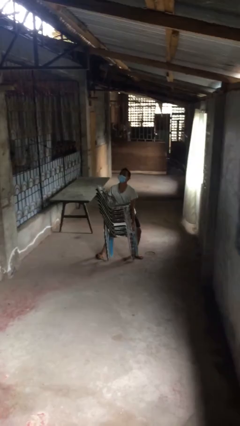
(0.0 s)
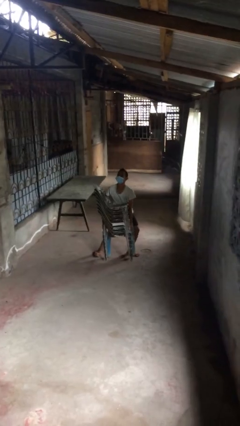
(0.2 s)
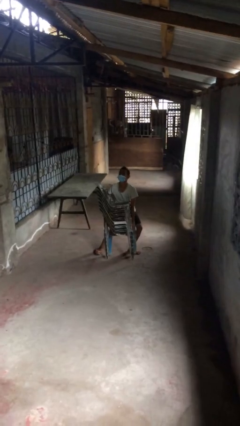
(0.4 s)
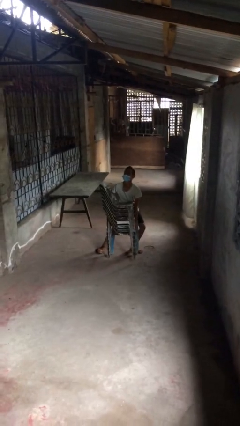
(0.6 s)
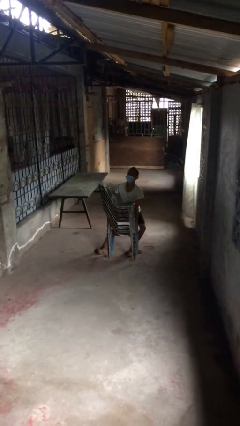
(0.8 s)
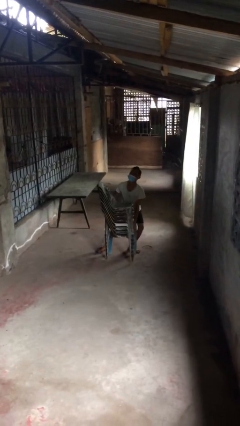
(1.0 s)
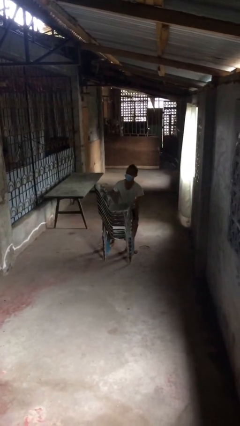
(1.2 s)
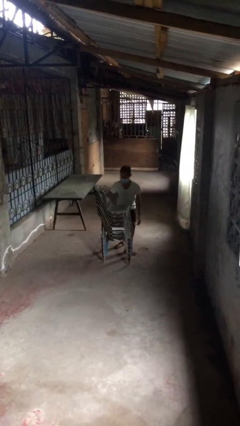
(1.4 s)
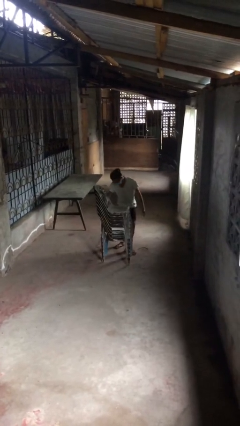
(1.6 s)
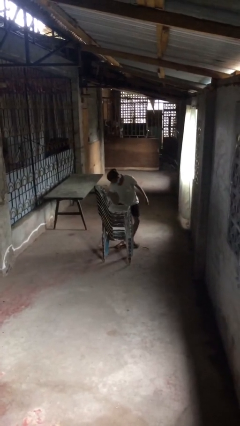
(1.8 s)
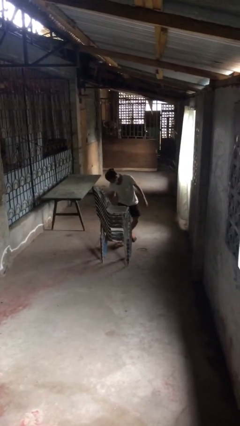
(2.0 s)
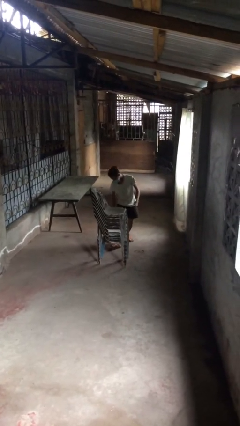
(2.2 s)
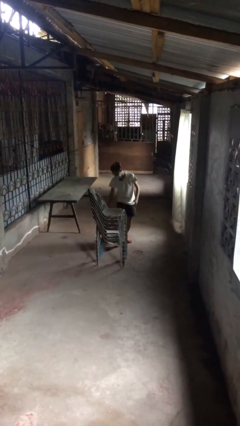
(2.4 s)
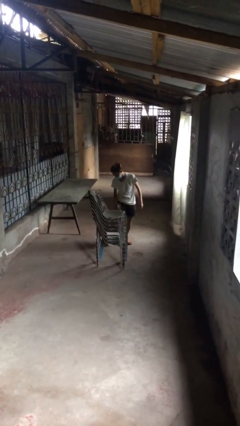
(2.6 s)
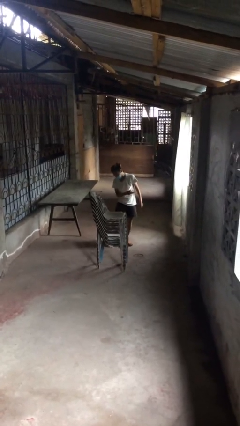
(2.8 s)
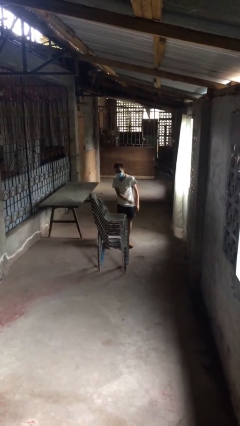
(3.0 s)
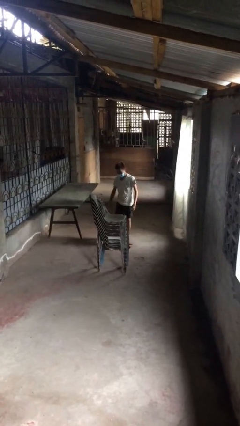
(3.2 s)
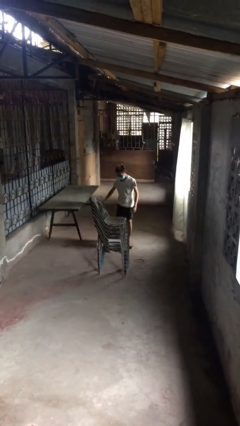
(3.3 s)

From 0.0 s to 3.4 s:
person puts down object on floor

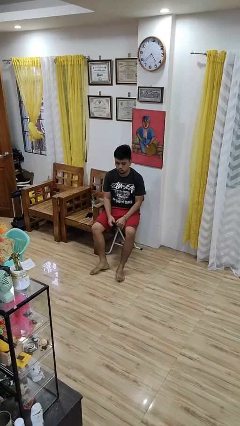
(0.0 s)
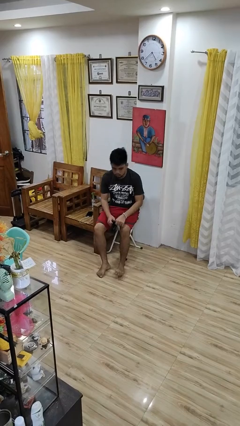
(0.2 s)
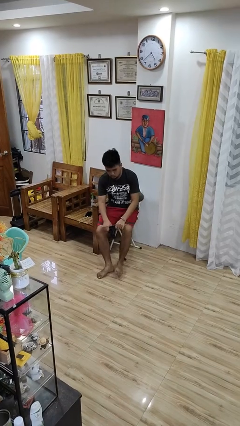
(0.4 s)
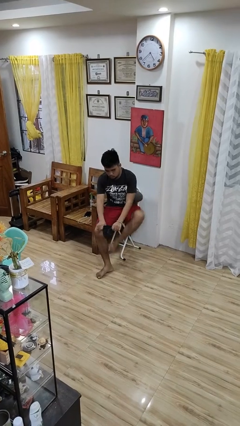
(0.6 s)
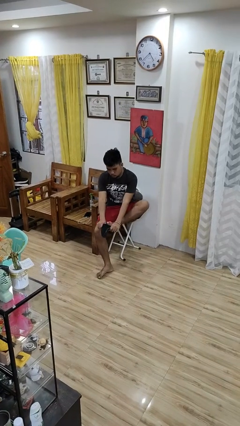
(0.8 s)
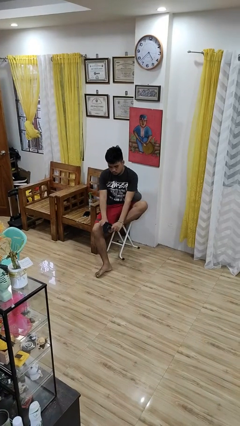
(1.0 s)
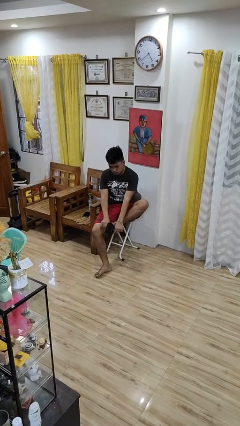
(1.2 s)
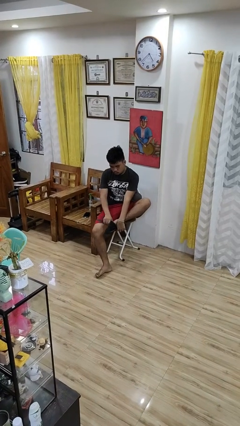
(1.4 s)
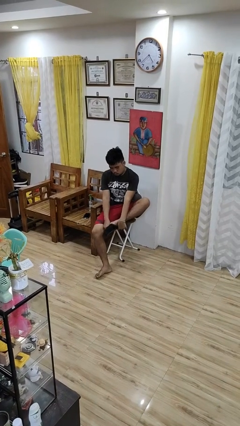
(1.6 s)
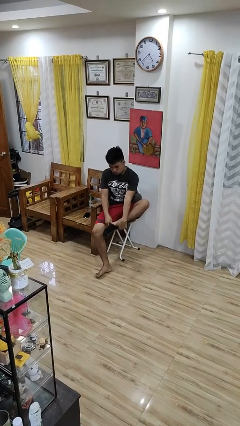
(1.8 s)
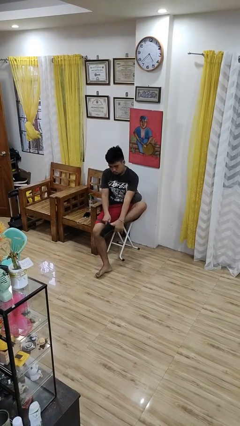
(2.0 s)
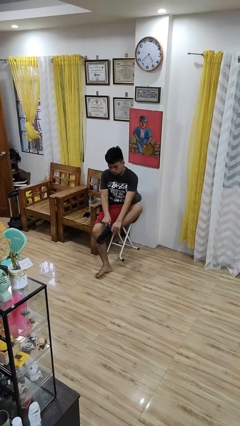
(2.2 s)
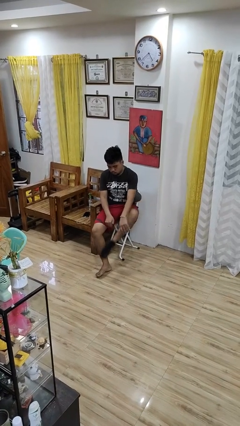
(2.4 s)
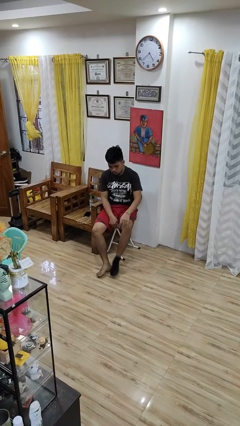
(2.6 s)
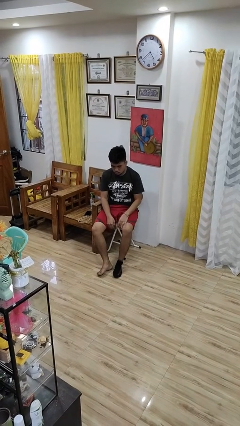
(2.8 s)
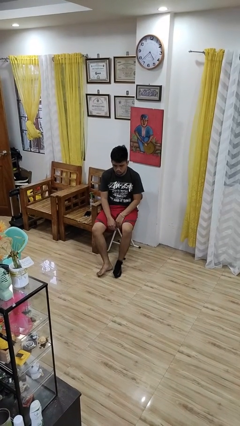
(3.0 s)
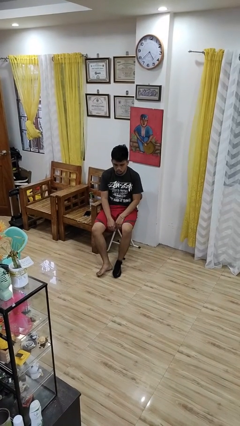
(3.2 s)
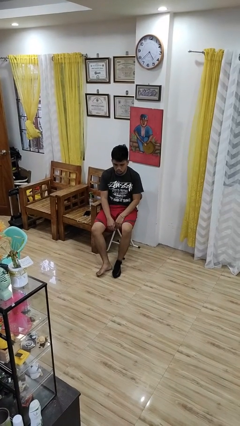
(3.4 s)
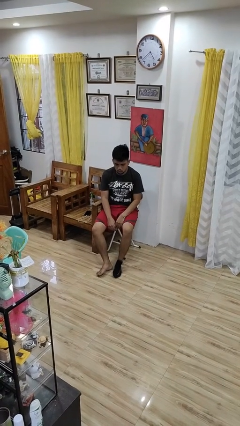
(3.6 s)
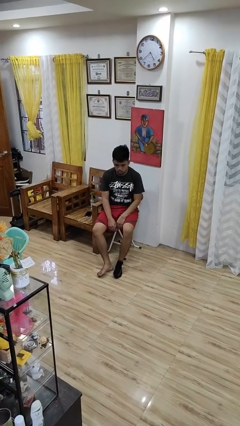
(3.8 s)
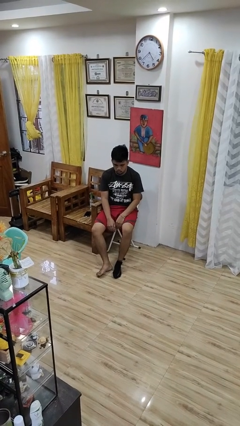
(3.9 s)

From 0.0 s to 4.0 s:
person puts on socks

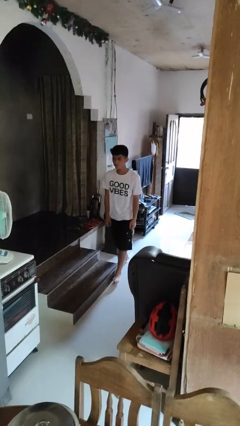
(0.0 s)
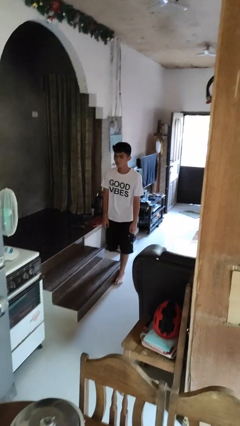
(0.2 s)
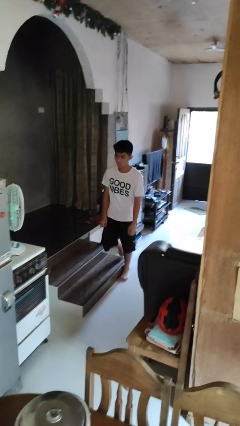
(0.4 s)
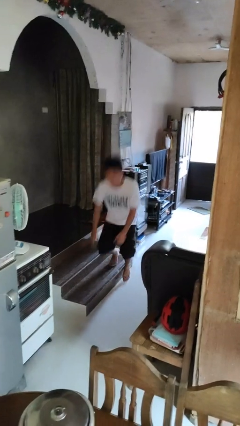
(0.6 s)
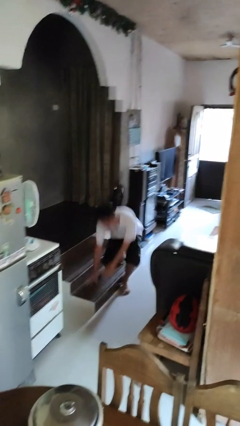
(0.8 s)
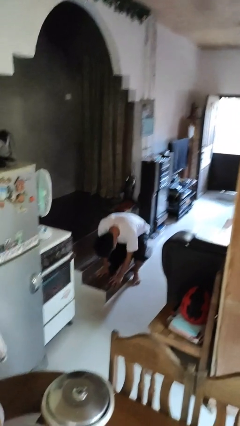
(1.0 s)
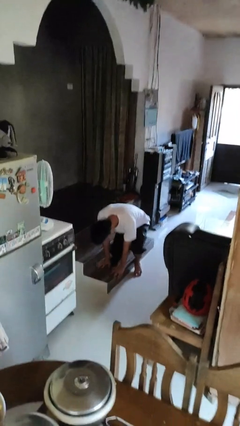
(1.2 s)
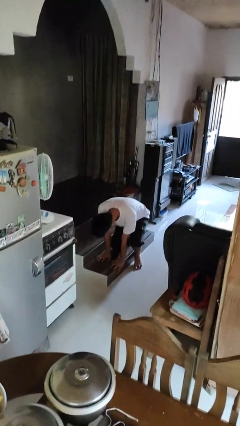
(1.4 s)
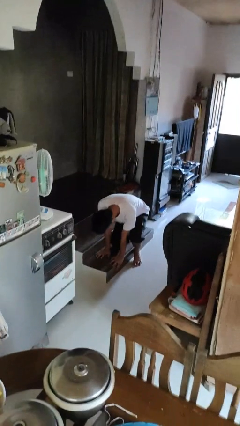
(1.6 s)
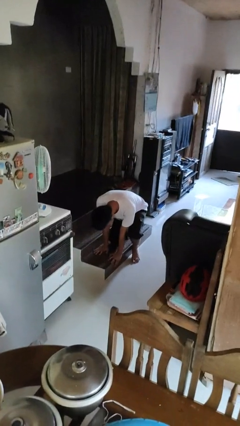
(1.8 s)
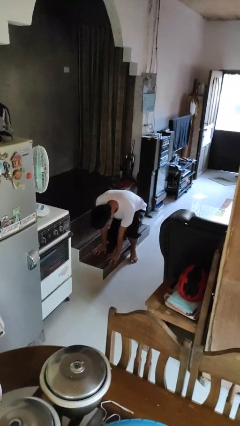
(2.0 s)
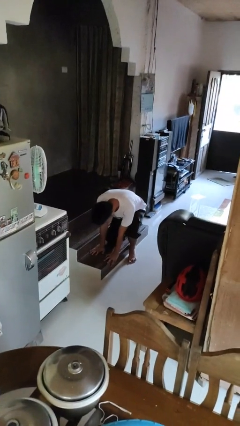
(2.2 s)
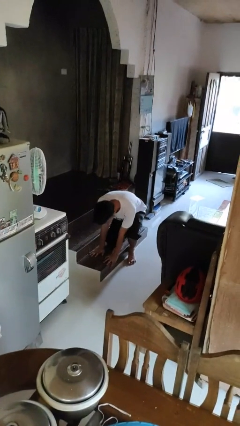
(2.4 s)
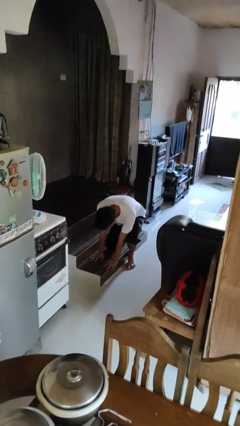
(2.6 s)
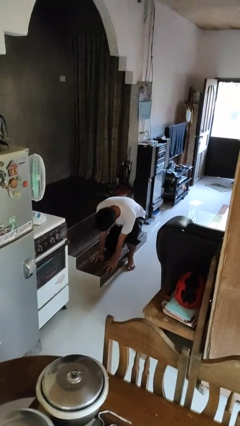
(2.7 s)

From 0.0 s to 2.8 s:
person trips on object on floor

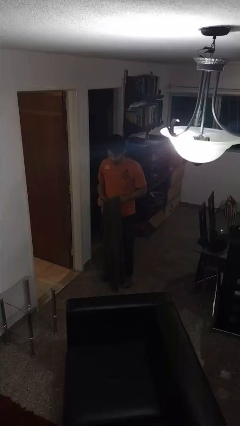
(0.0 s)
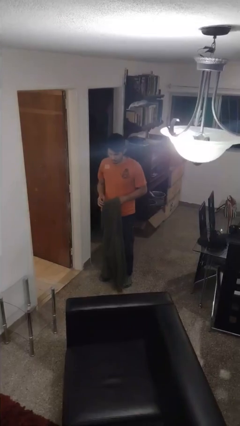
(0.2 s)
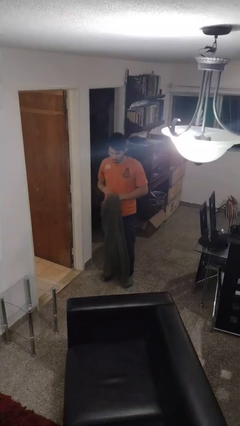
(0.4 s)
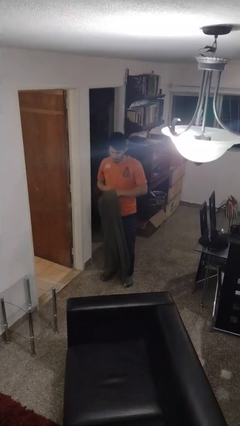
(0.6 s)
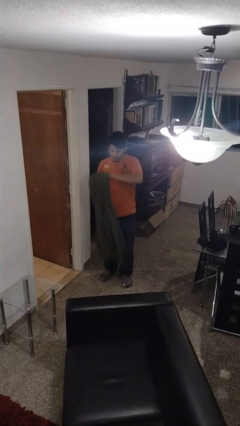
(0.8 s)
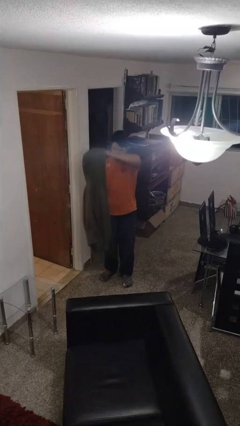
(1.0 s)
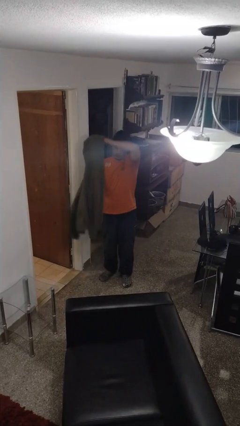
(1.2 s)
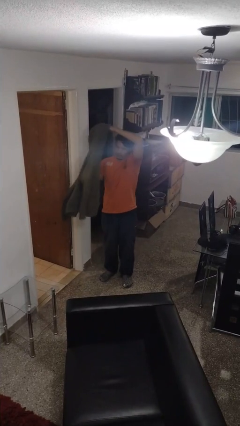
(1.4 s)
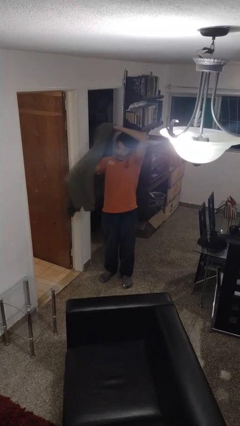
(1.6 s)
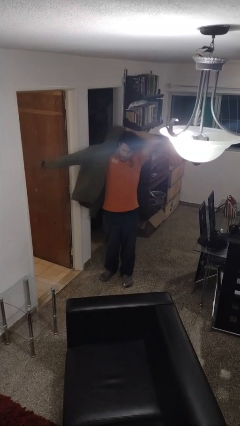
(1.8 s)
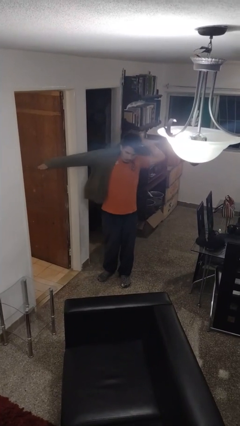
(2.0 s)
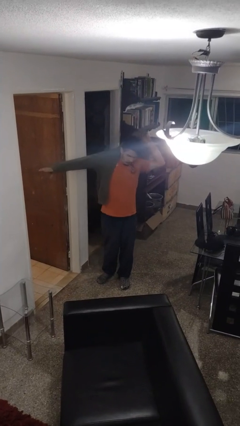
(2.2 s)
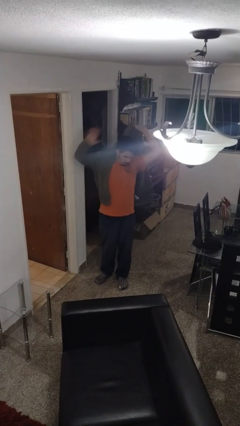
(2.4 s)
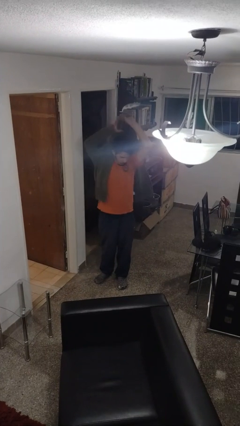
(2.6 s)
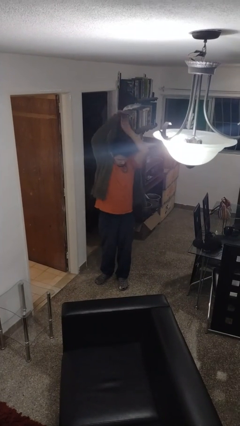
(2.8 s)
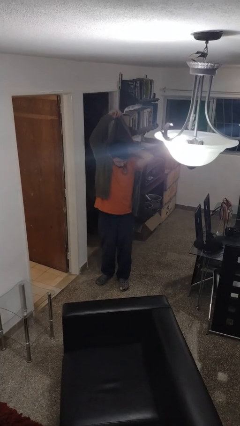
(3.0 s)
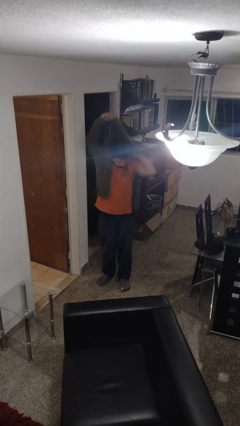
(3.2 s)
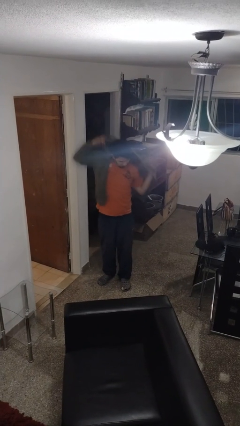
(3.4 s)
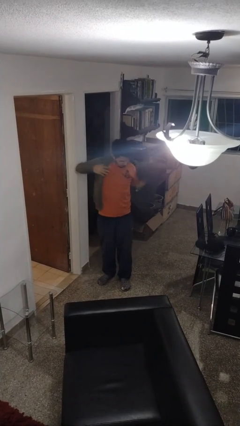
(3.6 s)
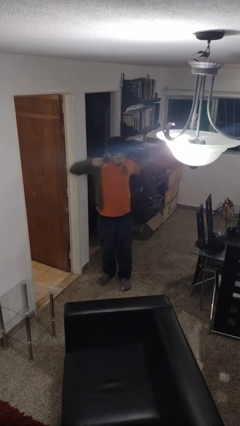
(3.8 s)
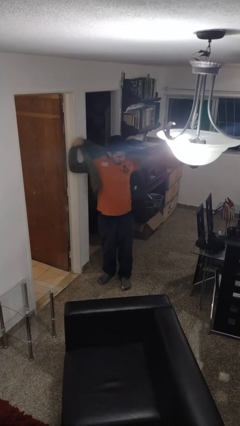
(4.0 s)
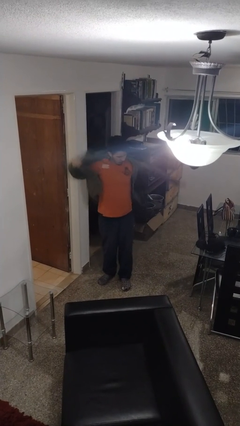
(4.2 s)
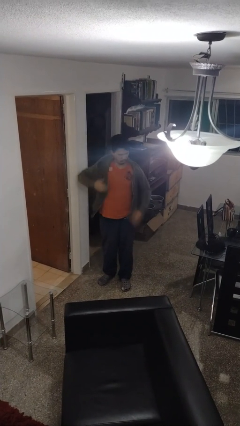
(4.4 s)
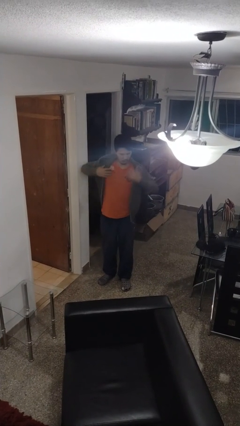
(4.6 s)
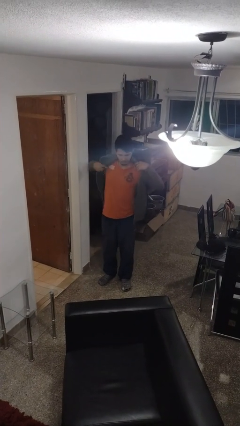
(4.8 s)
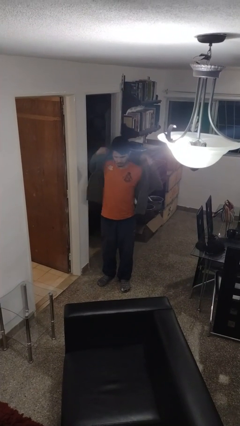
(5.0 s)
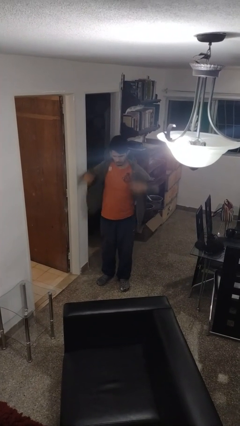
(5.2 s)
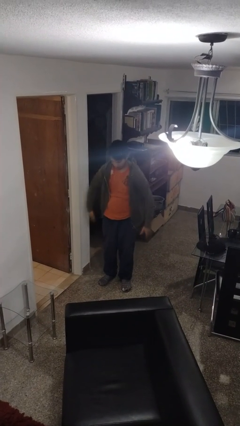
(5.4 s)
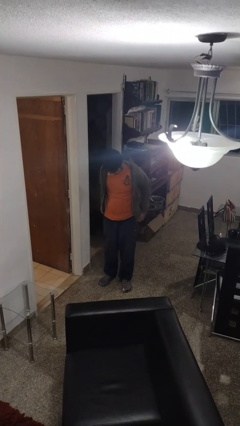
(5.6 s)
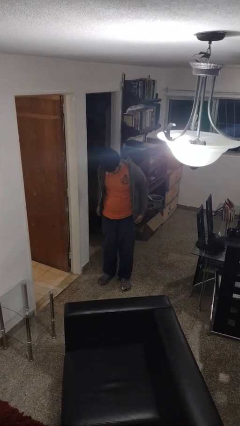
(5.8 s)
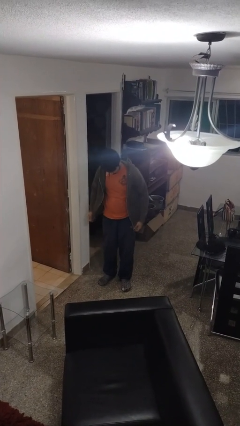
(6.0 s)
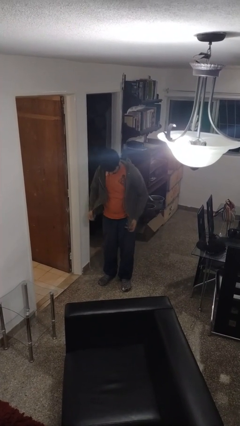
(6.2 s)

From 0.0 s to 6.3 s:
person puts on jacket

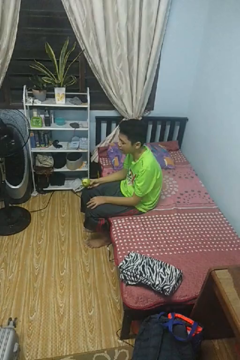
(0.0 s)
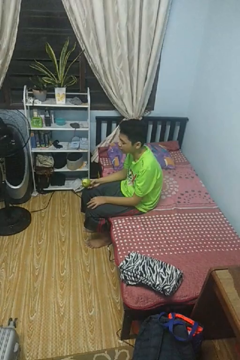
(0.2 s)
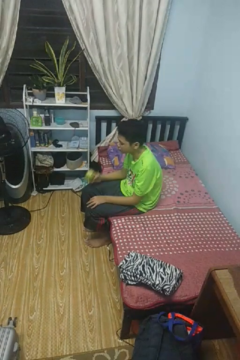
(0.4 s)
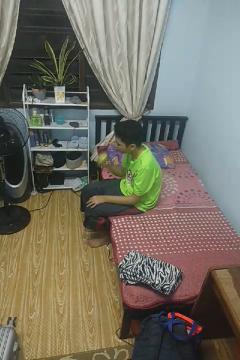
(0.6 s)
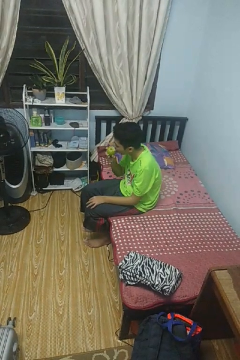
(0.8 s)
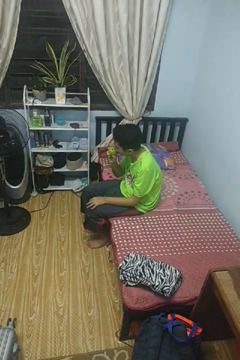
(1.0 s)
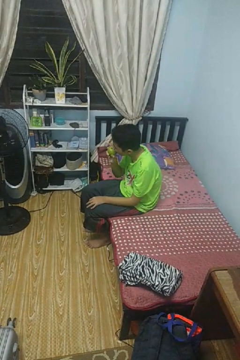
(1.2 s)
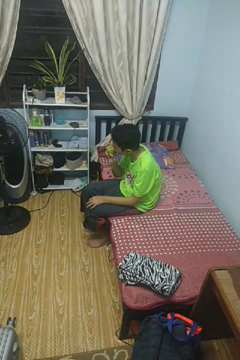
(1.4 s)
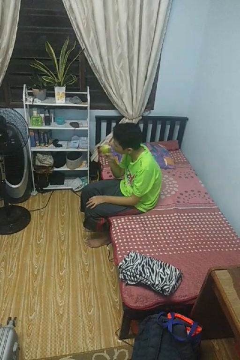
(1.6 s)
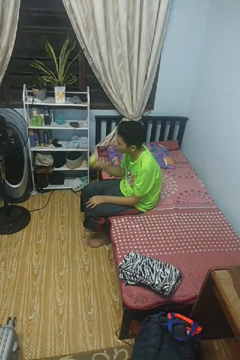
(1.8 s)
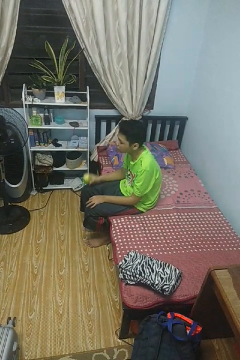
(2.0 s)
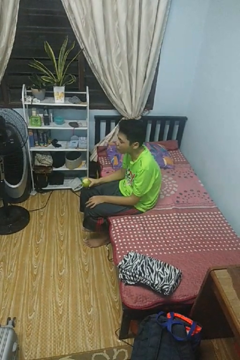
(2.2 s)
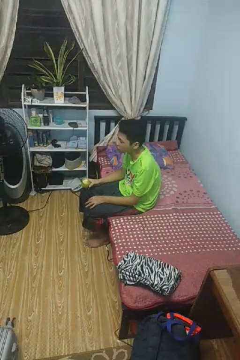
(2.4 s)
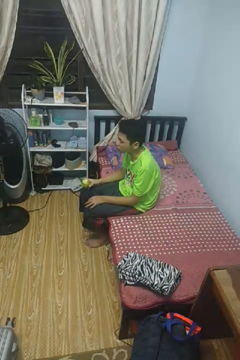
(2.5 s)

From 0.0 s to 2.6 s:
person eats apple
